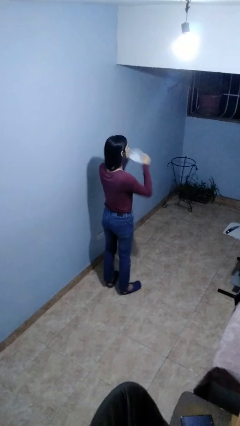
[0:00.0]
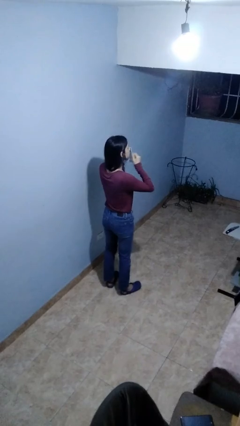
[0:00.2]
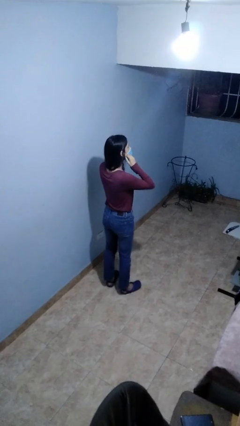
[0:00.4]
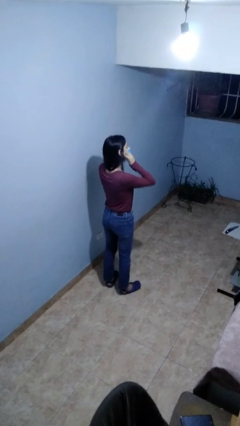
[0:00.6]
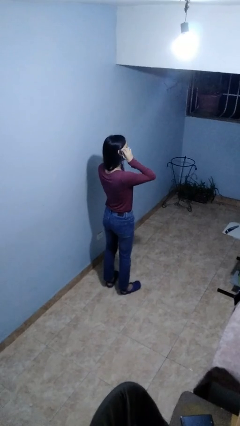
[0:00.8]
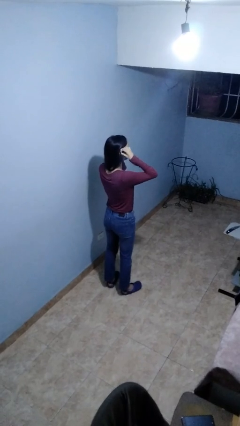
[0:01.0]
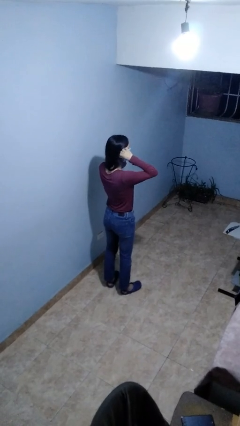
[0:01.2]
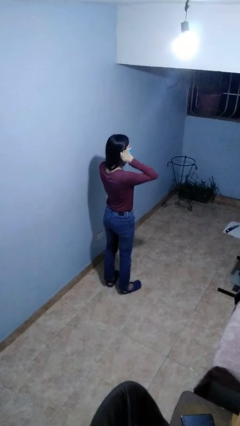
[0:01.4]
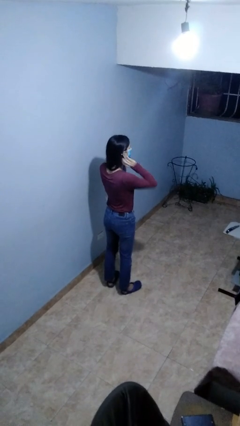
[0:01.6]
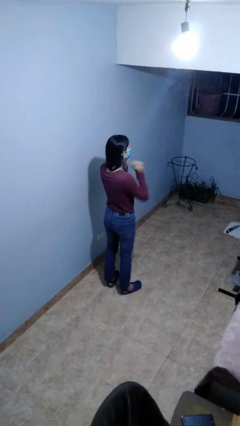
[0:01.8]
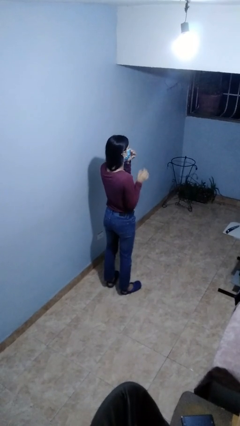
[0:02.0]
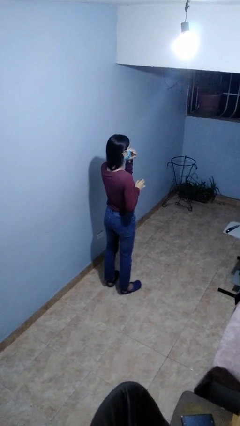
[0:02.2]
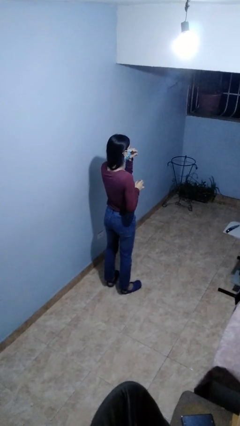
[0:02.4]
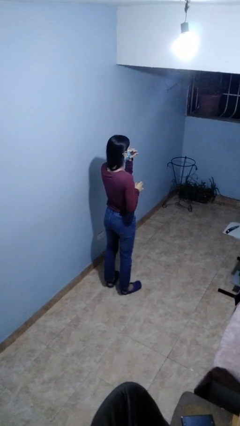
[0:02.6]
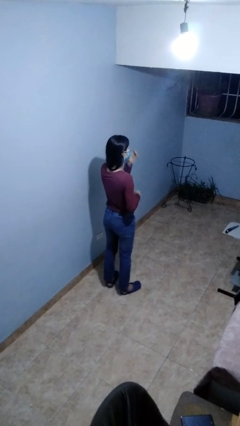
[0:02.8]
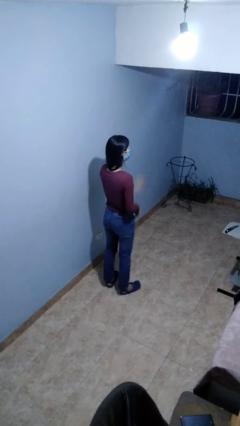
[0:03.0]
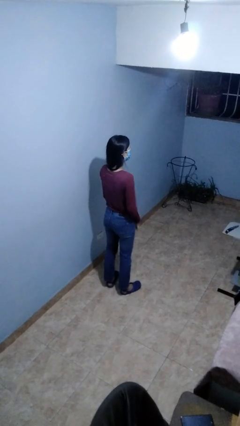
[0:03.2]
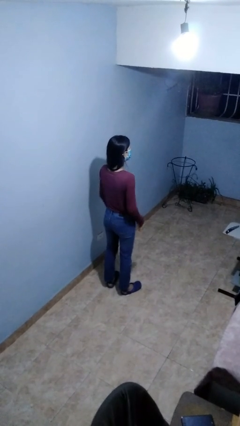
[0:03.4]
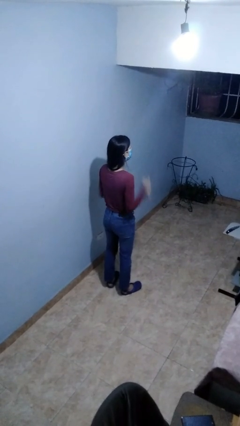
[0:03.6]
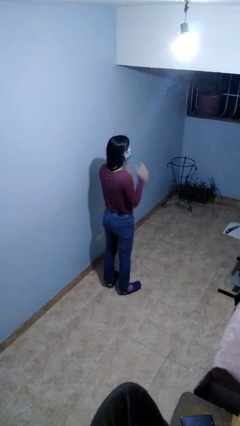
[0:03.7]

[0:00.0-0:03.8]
person puts on facemask

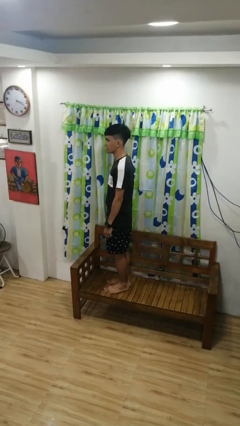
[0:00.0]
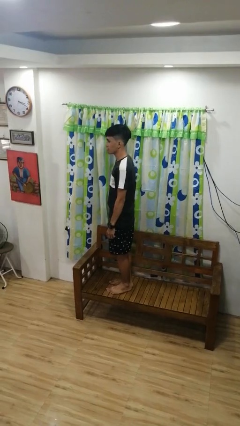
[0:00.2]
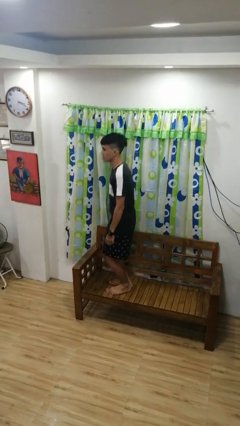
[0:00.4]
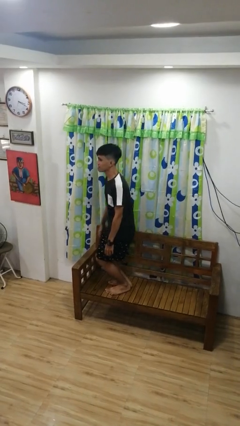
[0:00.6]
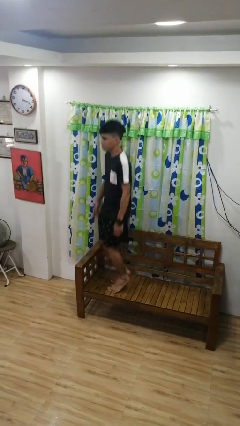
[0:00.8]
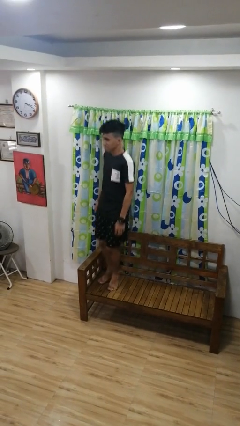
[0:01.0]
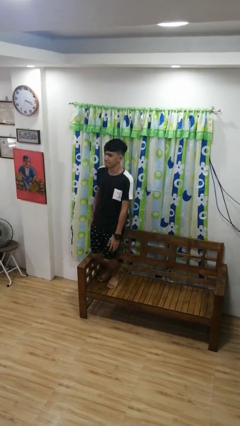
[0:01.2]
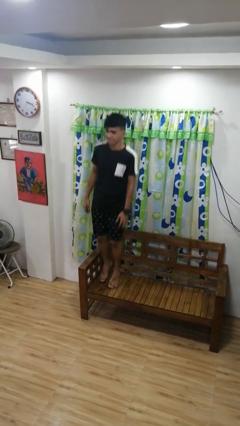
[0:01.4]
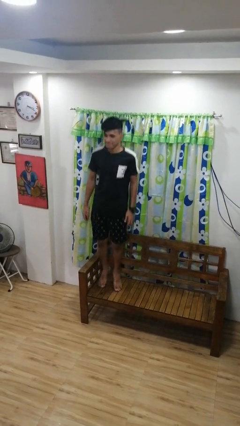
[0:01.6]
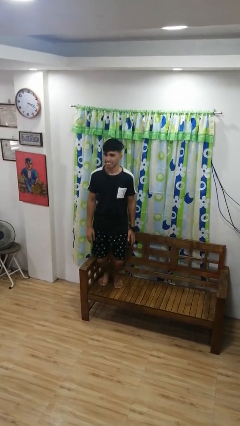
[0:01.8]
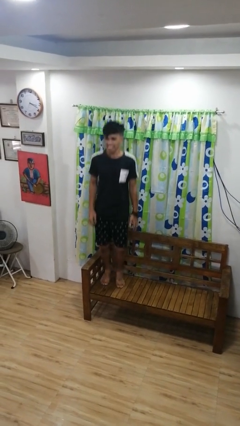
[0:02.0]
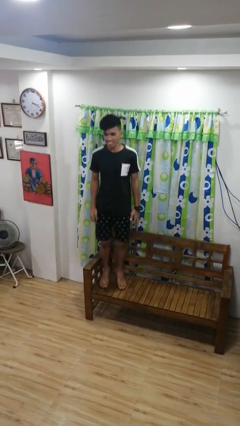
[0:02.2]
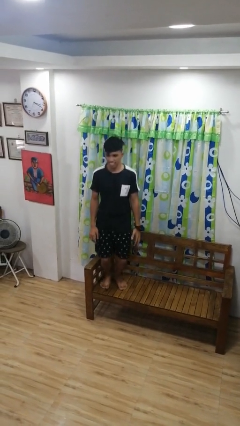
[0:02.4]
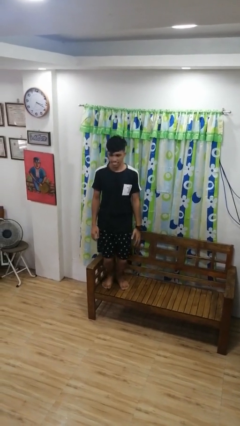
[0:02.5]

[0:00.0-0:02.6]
person jumps on couch

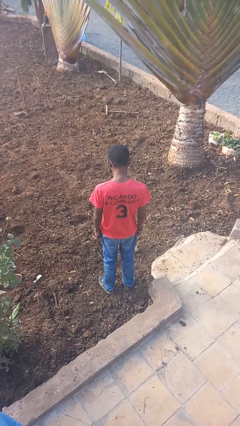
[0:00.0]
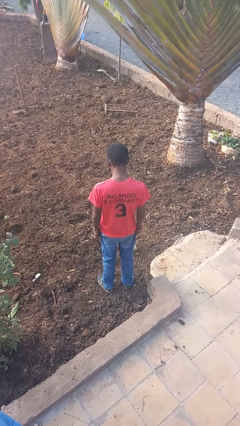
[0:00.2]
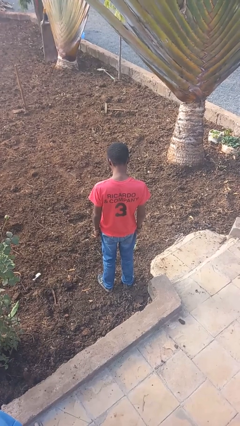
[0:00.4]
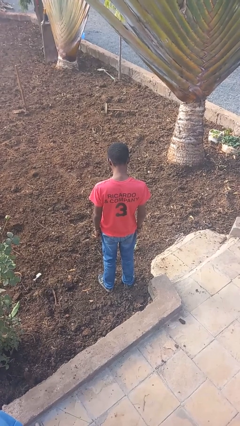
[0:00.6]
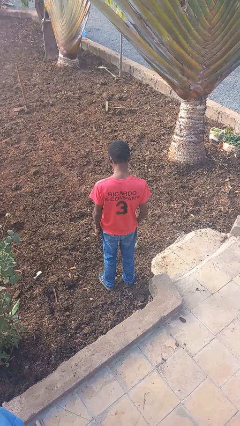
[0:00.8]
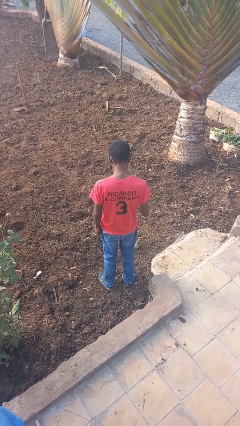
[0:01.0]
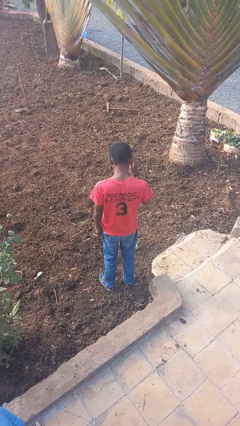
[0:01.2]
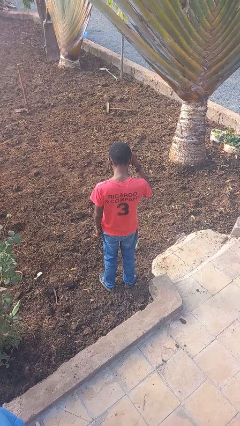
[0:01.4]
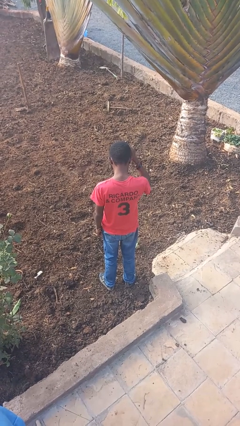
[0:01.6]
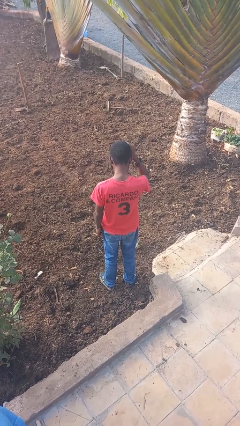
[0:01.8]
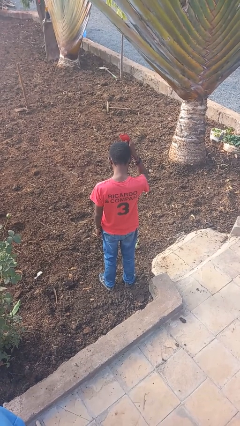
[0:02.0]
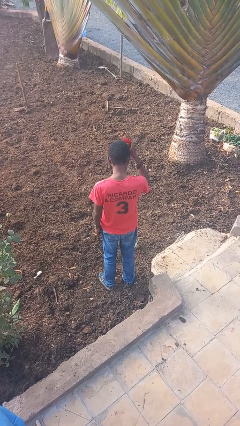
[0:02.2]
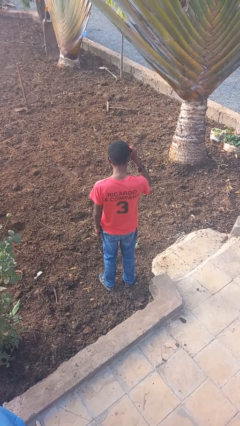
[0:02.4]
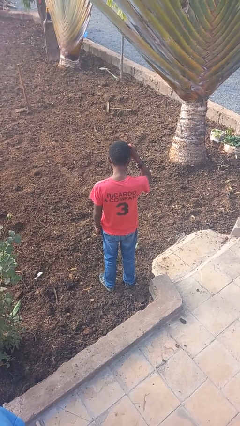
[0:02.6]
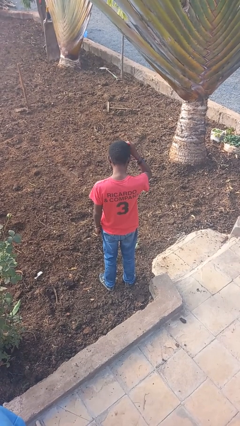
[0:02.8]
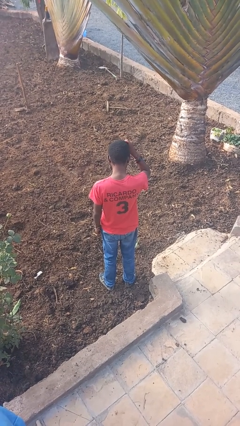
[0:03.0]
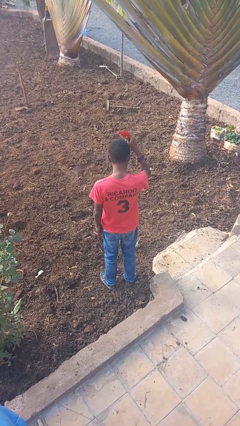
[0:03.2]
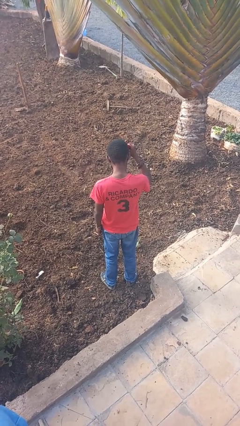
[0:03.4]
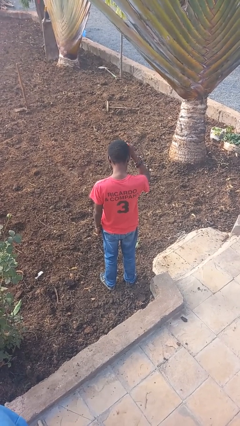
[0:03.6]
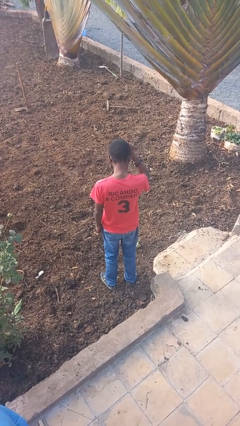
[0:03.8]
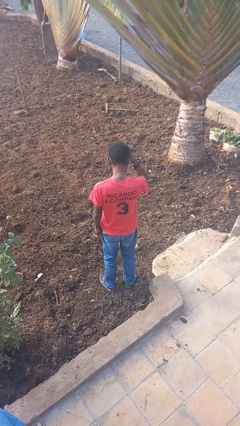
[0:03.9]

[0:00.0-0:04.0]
person brushes hair

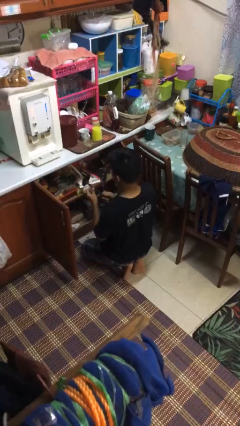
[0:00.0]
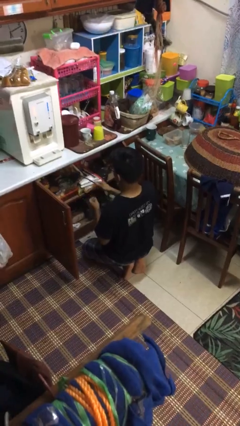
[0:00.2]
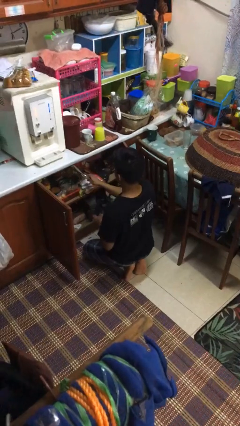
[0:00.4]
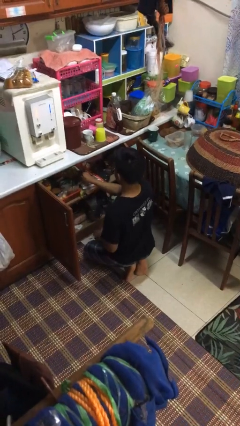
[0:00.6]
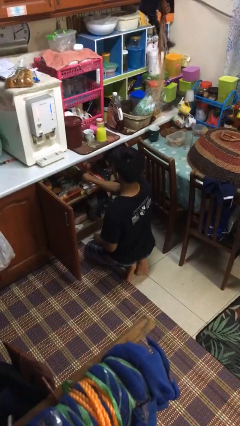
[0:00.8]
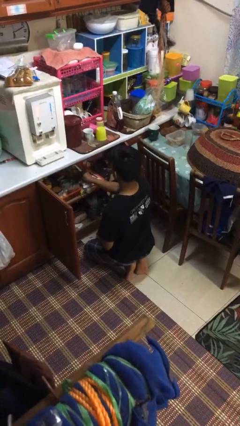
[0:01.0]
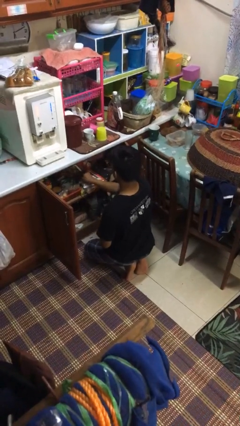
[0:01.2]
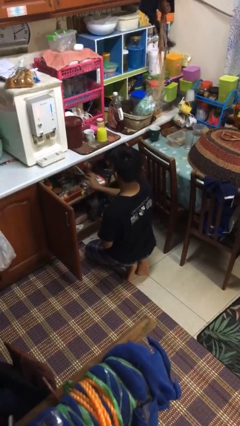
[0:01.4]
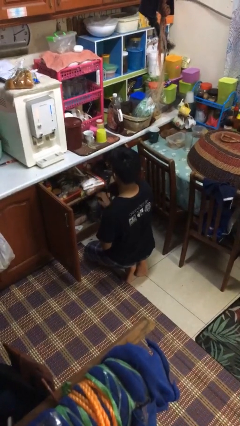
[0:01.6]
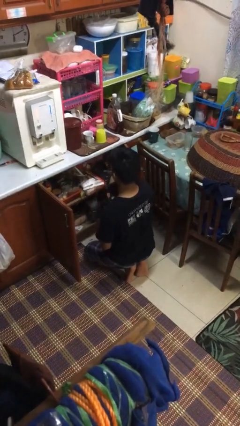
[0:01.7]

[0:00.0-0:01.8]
person puts object into kitchen drawer

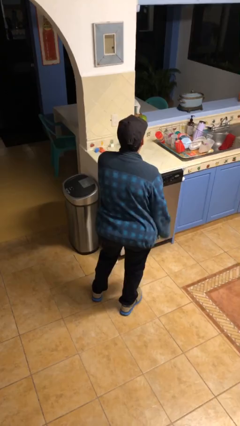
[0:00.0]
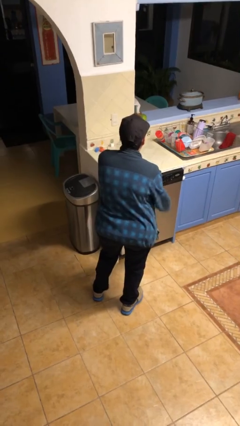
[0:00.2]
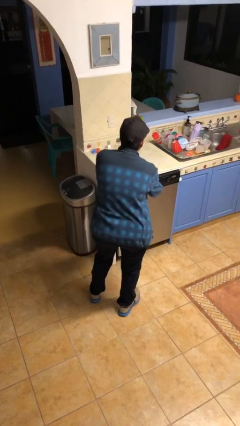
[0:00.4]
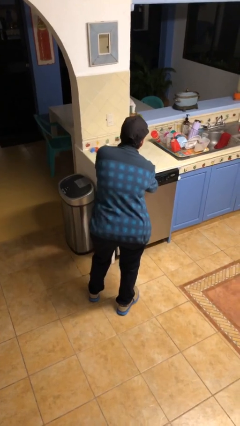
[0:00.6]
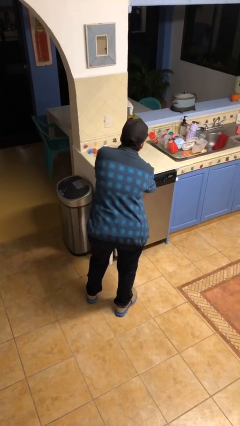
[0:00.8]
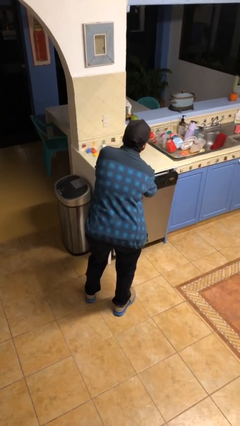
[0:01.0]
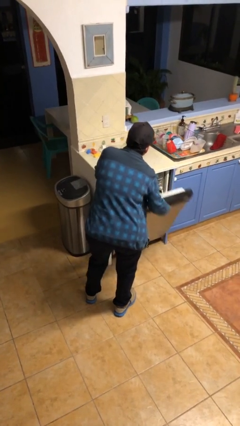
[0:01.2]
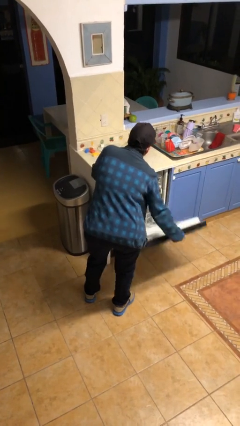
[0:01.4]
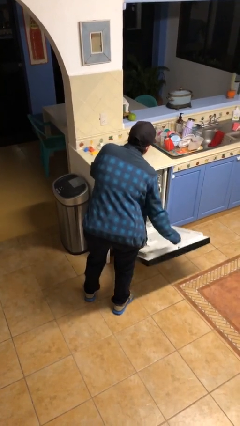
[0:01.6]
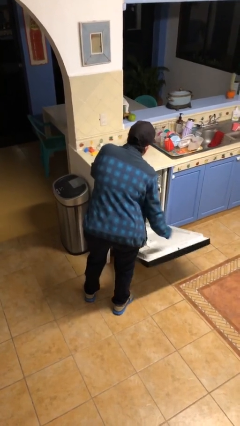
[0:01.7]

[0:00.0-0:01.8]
person opens dishwasher

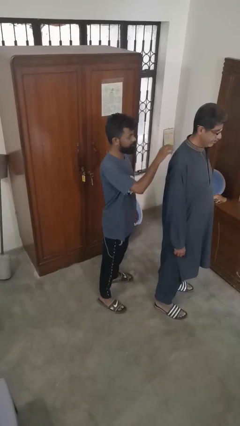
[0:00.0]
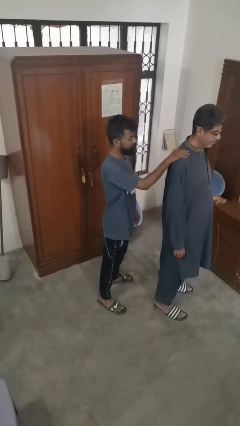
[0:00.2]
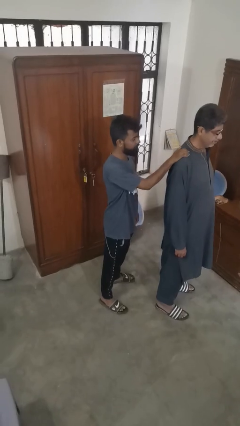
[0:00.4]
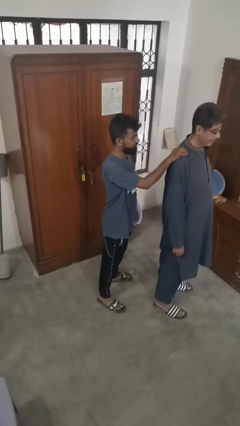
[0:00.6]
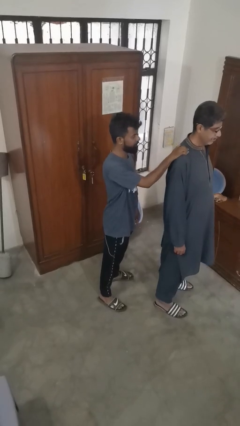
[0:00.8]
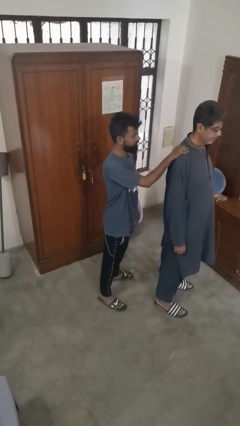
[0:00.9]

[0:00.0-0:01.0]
person grabs person by shoulder

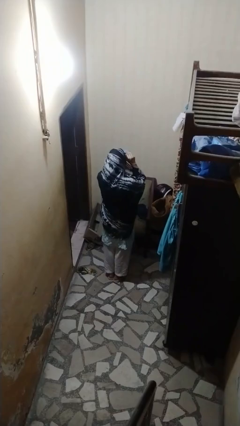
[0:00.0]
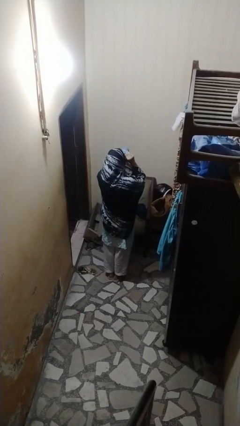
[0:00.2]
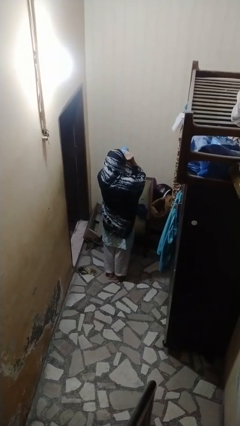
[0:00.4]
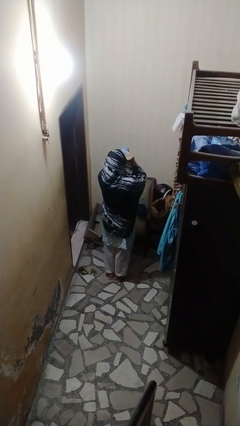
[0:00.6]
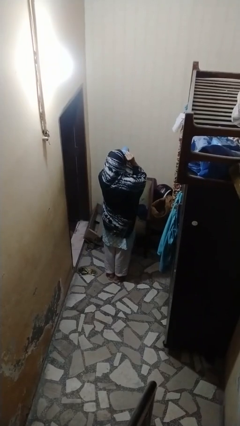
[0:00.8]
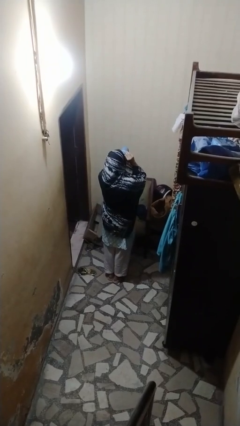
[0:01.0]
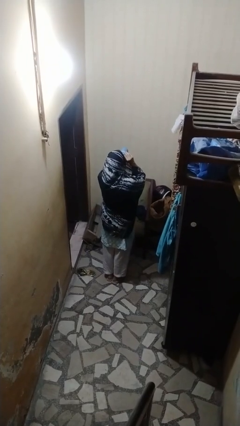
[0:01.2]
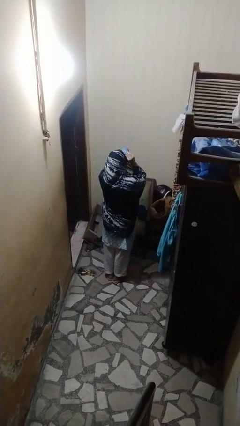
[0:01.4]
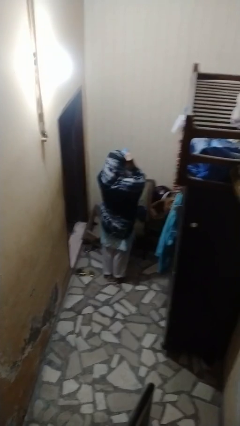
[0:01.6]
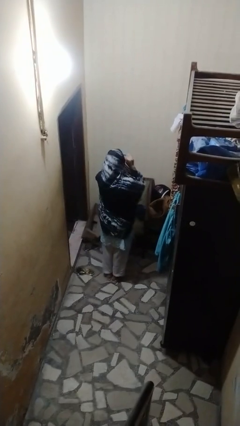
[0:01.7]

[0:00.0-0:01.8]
person drinks from mug

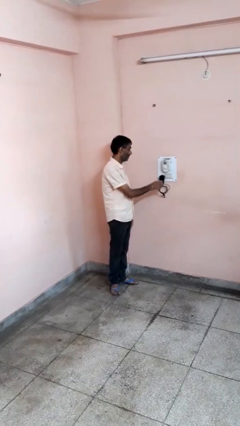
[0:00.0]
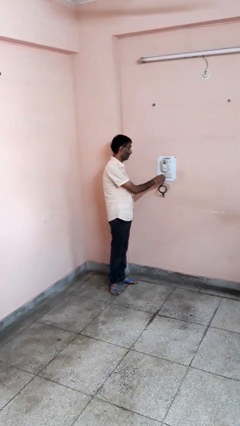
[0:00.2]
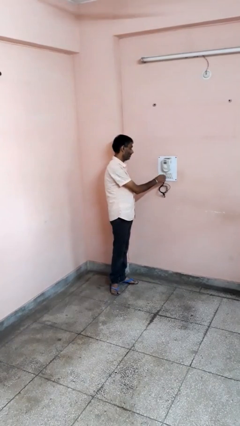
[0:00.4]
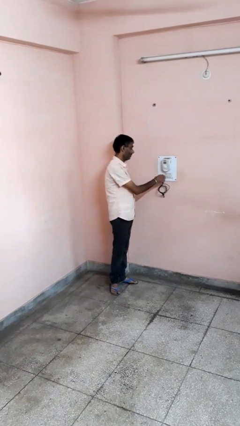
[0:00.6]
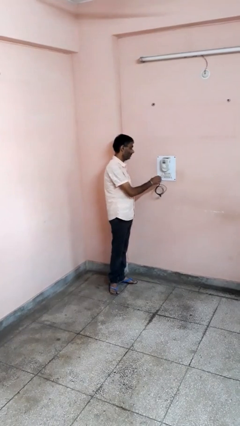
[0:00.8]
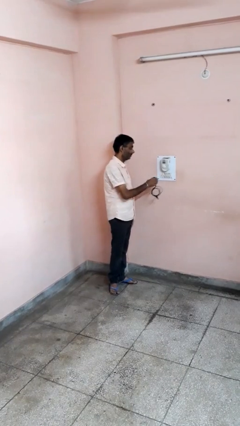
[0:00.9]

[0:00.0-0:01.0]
person unplugs from electrical socket
